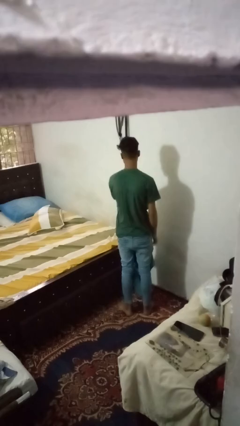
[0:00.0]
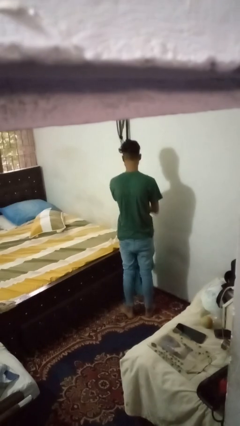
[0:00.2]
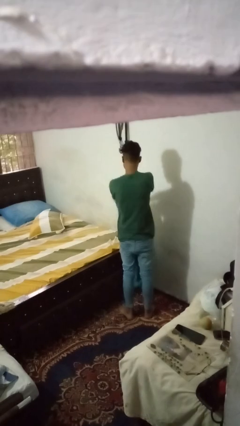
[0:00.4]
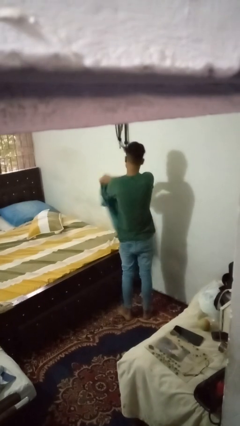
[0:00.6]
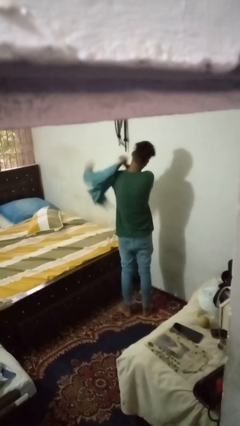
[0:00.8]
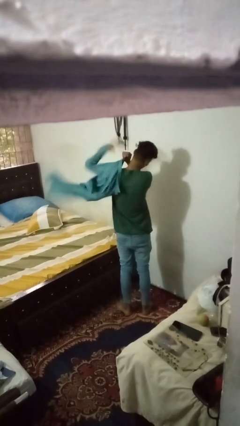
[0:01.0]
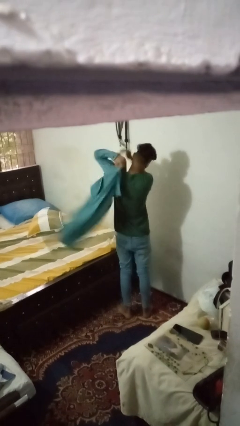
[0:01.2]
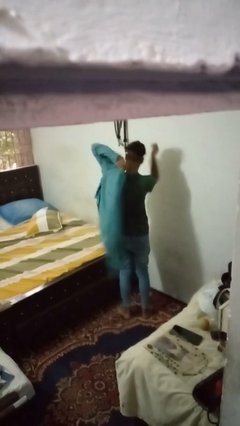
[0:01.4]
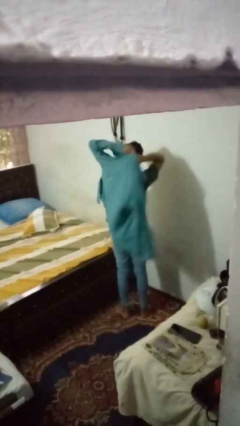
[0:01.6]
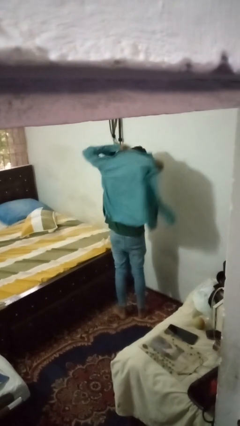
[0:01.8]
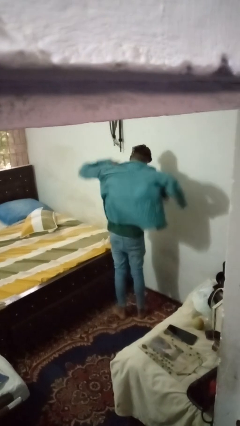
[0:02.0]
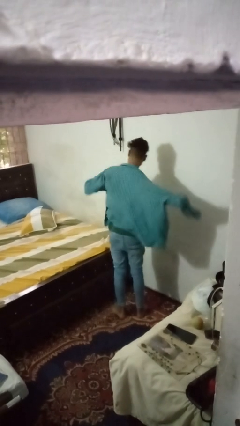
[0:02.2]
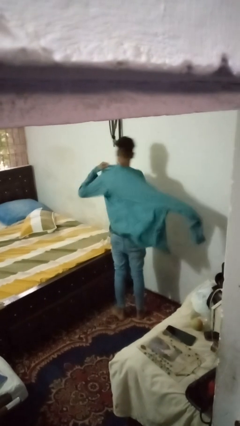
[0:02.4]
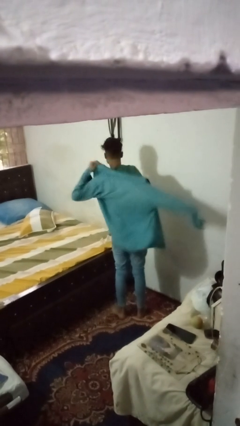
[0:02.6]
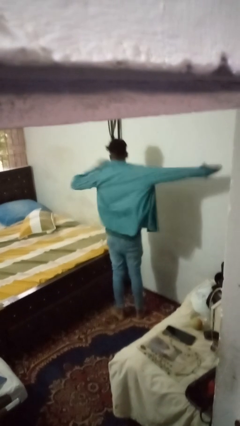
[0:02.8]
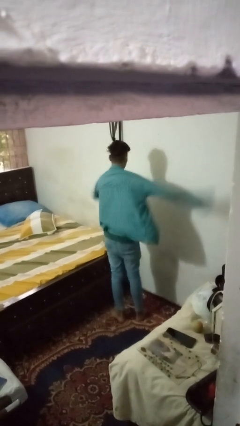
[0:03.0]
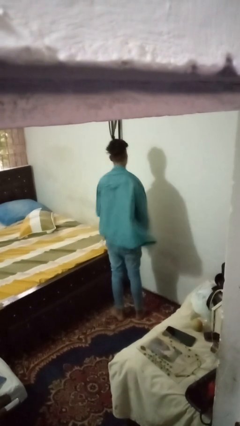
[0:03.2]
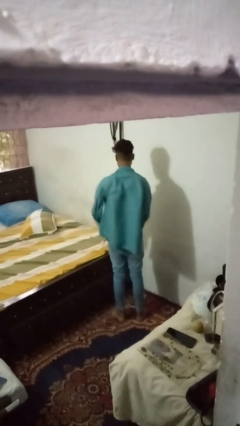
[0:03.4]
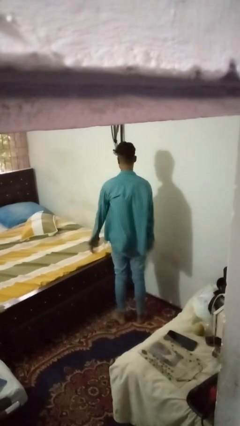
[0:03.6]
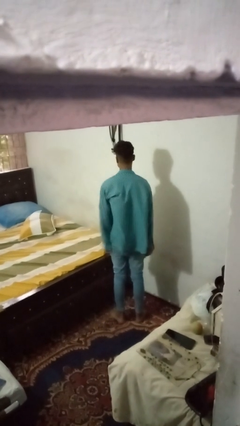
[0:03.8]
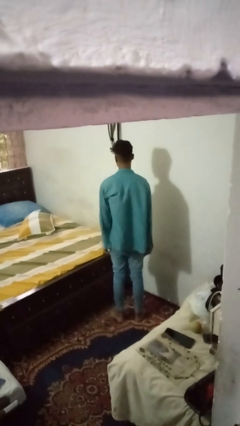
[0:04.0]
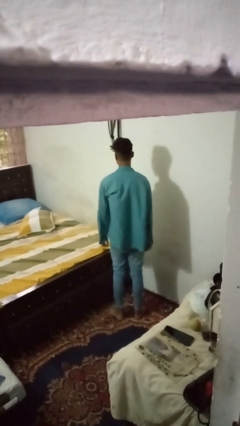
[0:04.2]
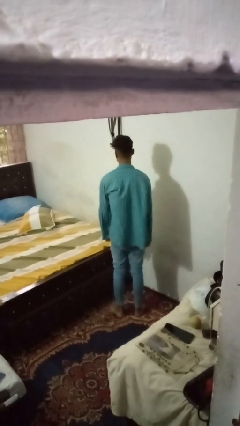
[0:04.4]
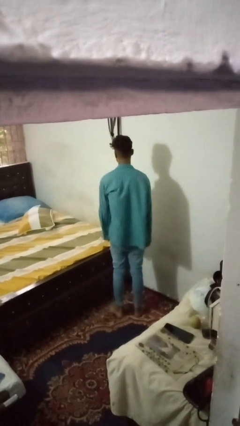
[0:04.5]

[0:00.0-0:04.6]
person puts on shirt

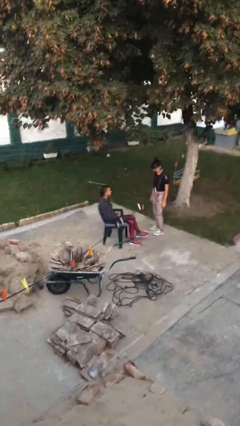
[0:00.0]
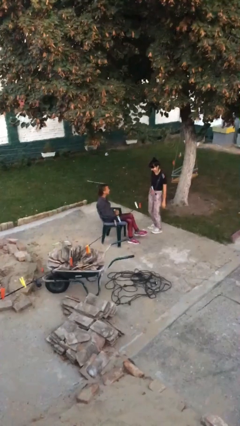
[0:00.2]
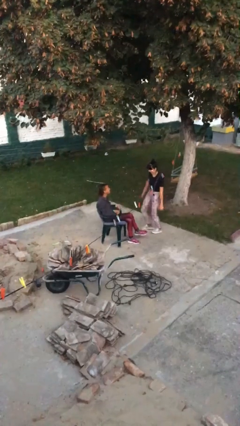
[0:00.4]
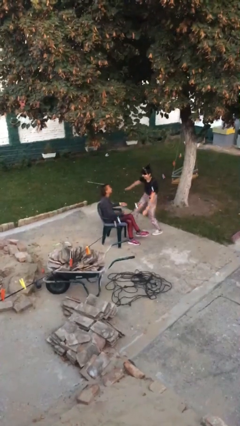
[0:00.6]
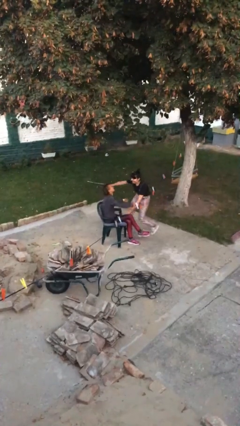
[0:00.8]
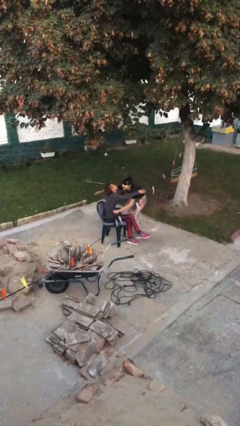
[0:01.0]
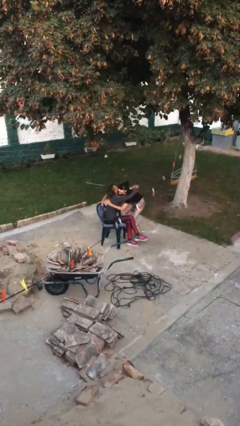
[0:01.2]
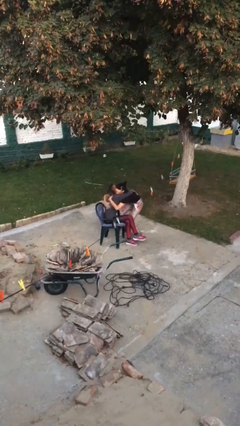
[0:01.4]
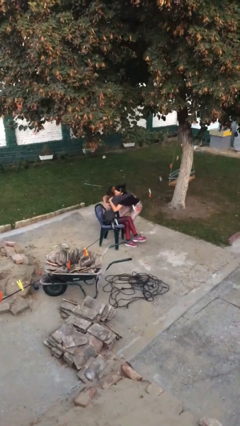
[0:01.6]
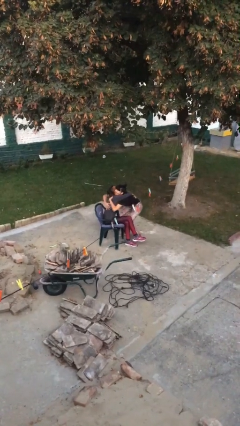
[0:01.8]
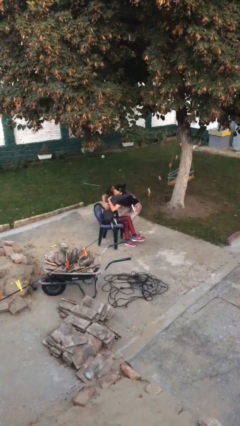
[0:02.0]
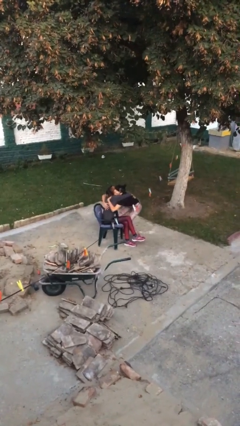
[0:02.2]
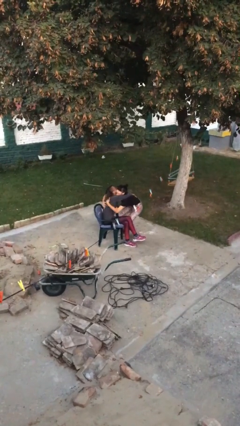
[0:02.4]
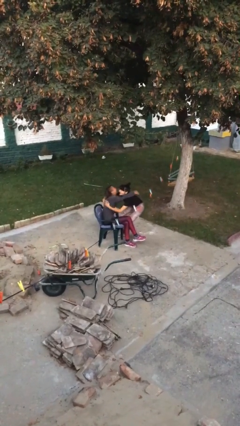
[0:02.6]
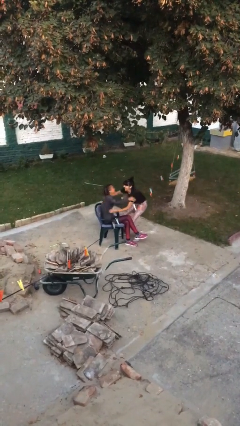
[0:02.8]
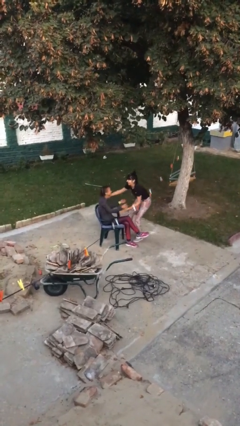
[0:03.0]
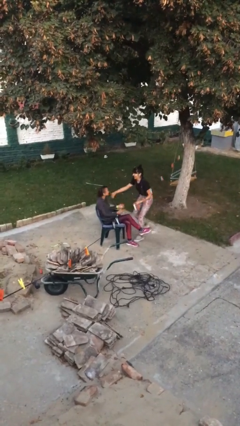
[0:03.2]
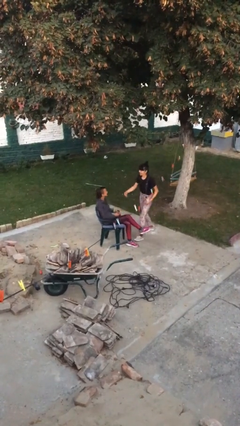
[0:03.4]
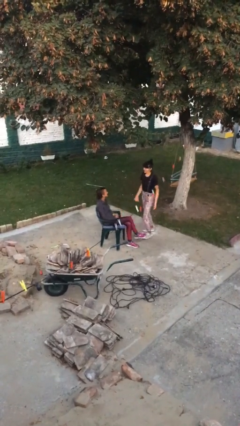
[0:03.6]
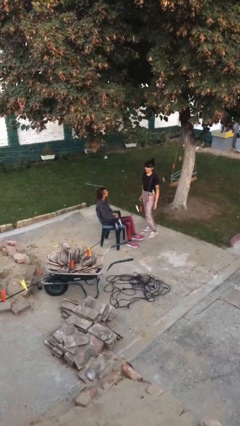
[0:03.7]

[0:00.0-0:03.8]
person embraces person

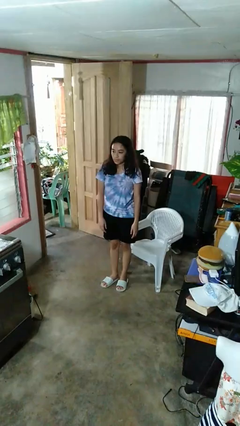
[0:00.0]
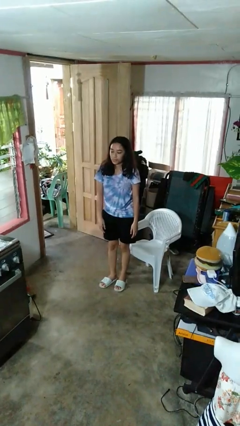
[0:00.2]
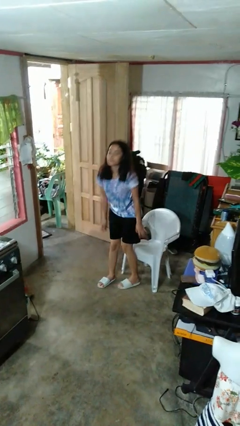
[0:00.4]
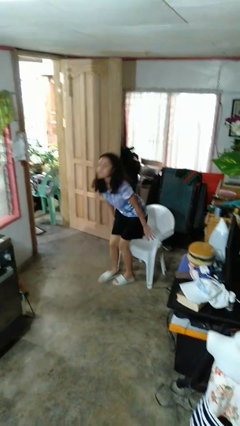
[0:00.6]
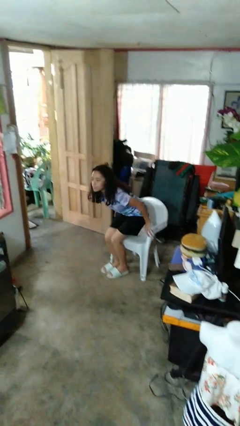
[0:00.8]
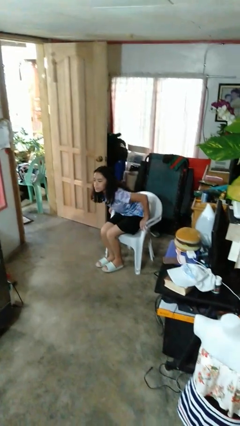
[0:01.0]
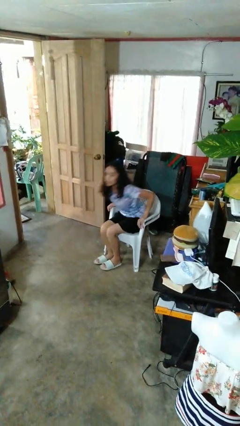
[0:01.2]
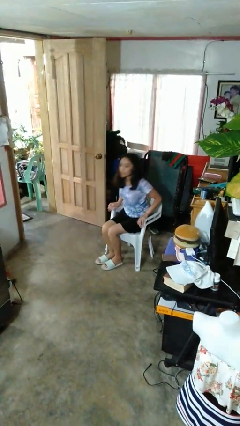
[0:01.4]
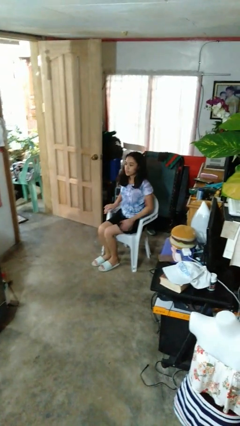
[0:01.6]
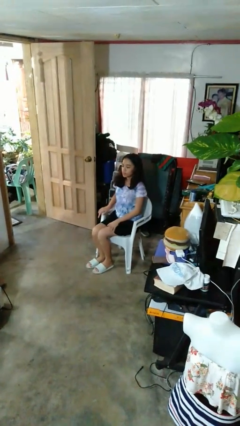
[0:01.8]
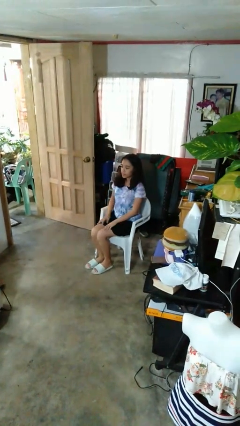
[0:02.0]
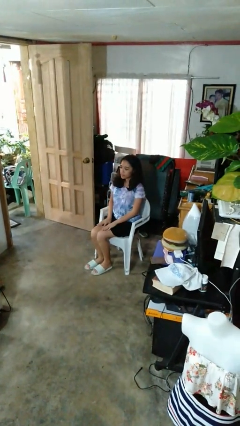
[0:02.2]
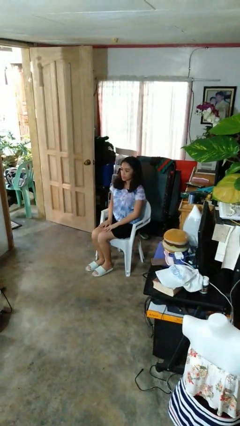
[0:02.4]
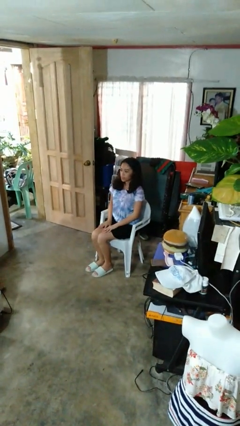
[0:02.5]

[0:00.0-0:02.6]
person sits down

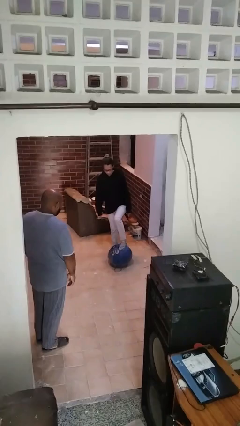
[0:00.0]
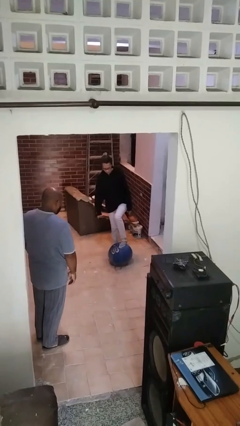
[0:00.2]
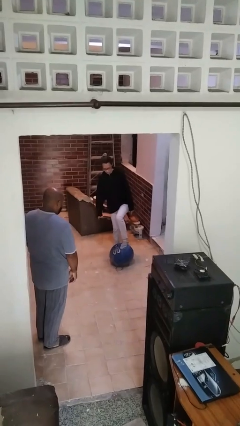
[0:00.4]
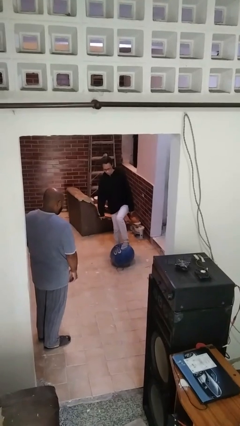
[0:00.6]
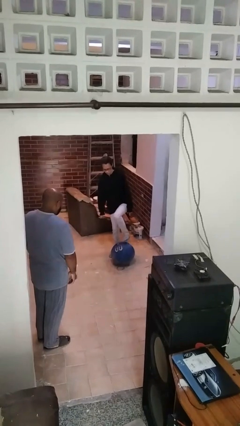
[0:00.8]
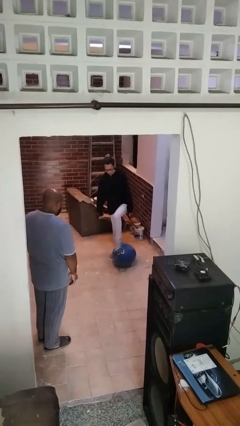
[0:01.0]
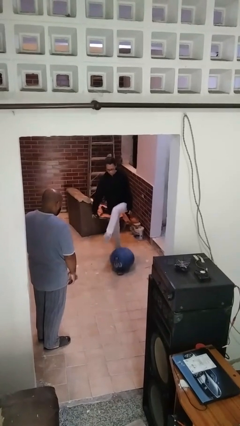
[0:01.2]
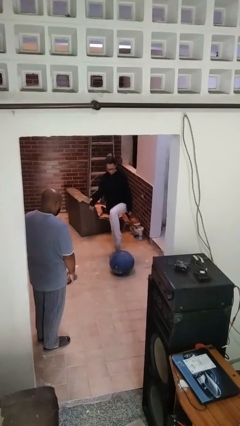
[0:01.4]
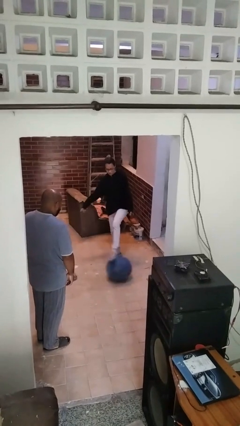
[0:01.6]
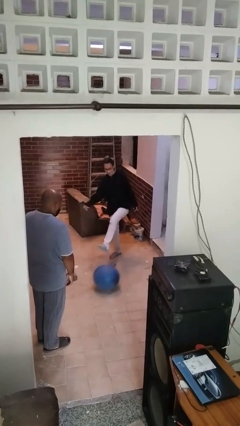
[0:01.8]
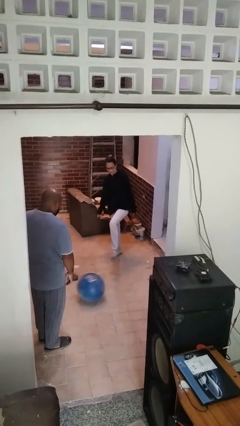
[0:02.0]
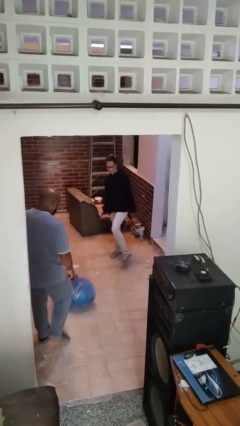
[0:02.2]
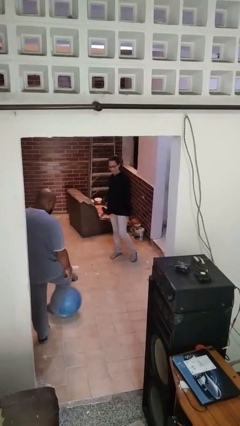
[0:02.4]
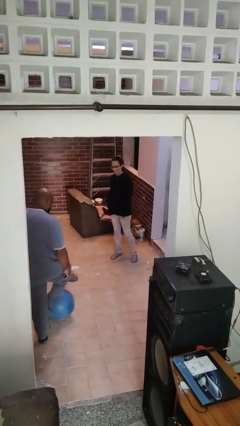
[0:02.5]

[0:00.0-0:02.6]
person kicks object to person

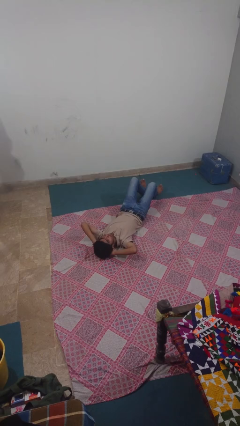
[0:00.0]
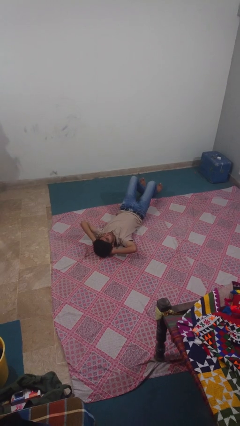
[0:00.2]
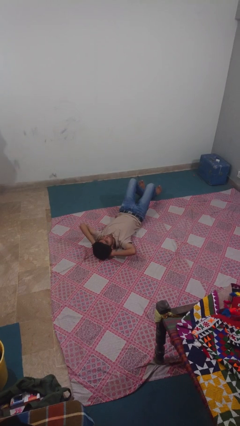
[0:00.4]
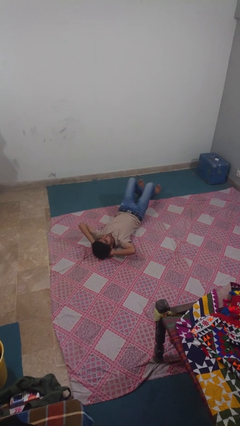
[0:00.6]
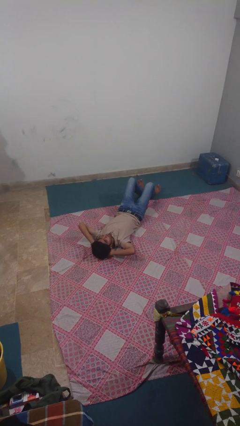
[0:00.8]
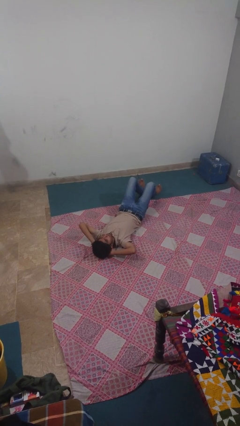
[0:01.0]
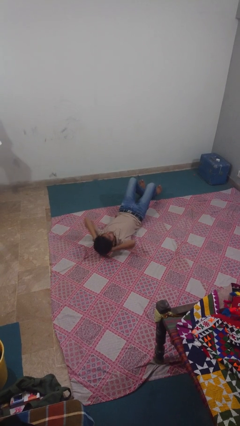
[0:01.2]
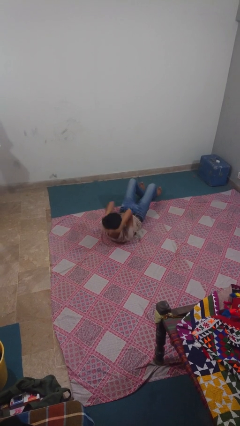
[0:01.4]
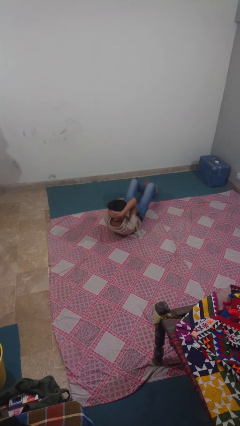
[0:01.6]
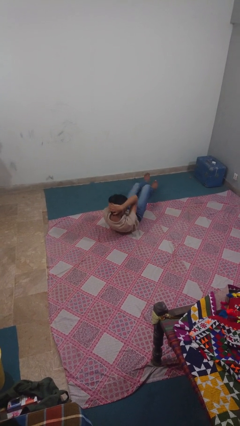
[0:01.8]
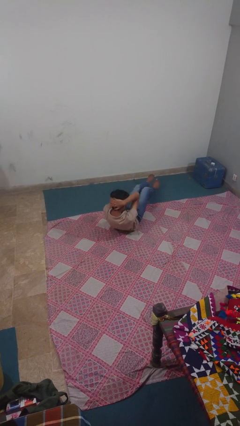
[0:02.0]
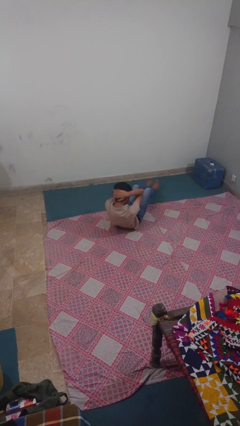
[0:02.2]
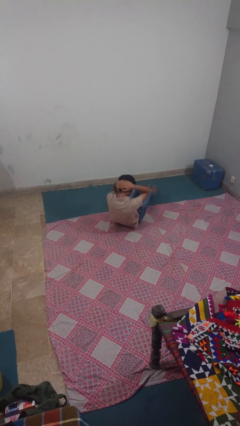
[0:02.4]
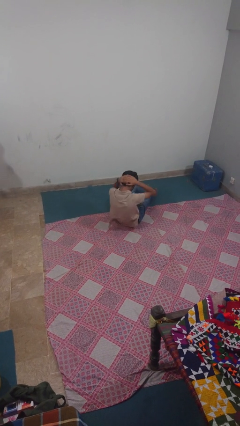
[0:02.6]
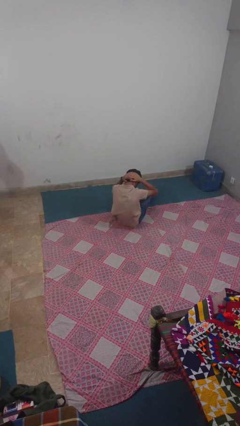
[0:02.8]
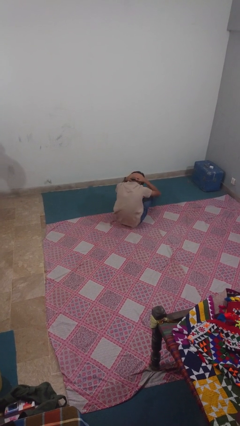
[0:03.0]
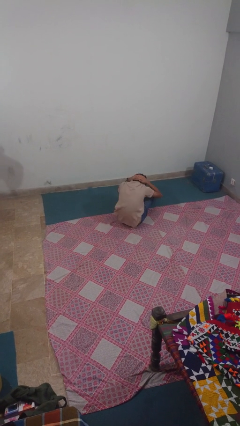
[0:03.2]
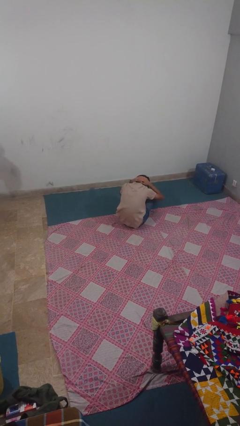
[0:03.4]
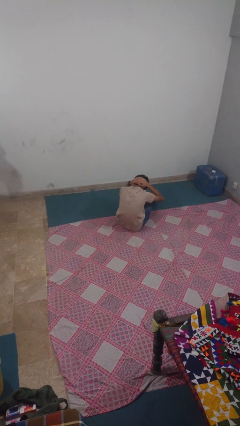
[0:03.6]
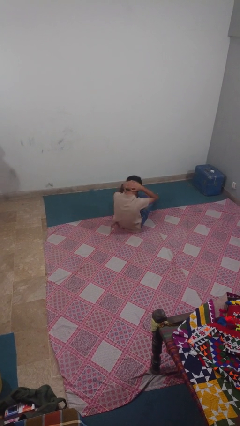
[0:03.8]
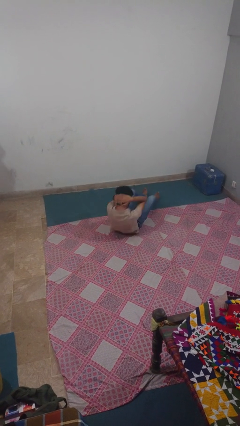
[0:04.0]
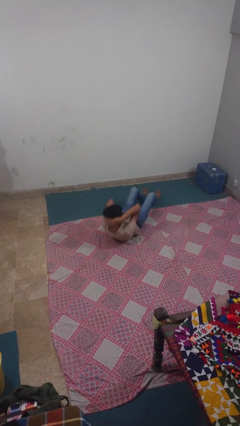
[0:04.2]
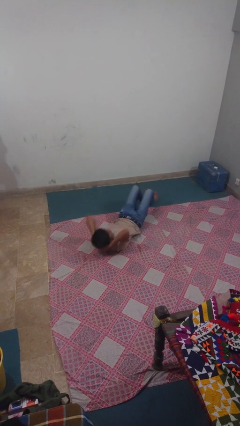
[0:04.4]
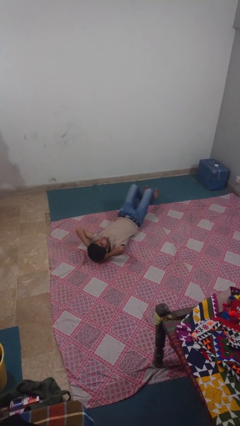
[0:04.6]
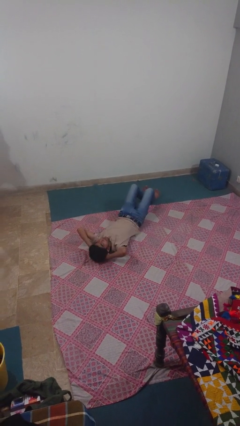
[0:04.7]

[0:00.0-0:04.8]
person exercises with situp
